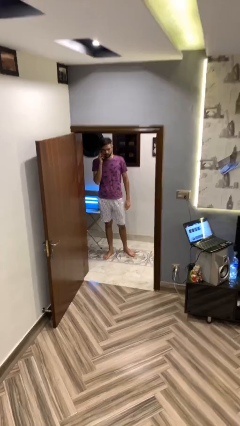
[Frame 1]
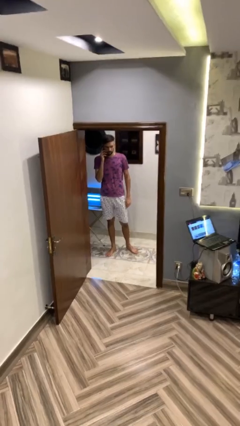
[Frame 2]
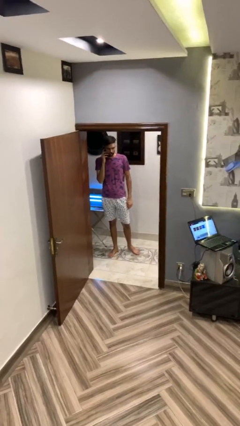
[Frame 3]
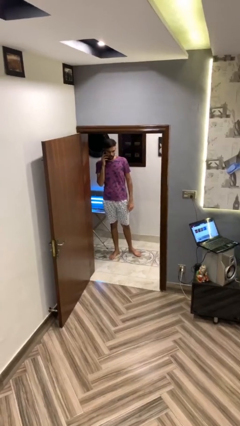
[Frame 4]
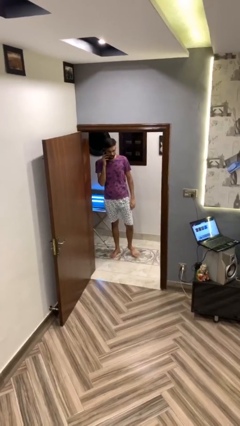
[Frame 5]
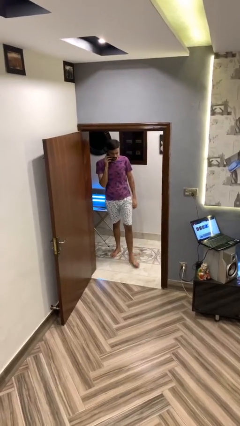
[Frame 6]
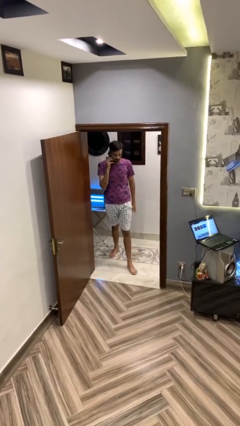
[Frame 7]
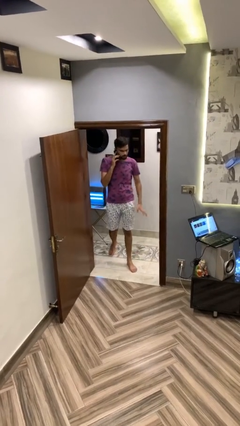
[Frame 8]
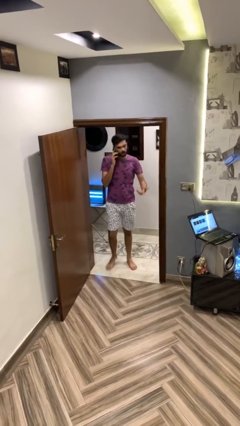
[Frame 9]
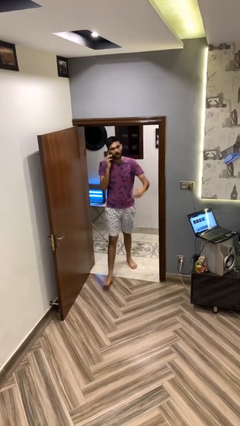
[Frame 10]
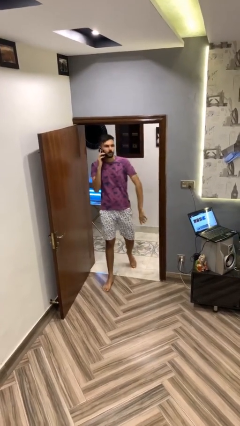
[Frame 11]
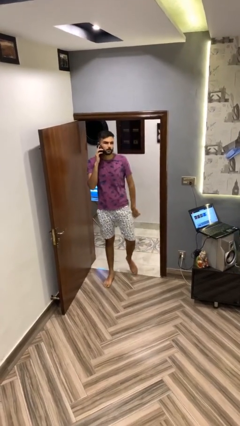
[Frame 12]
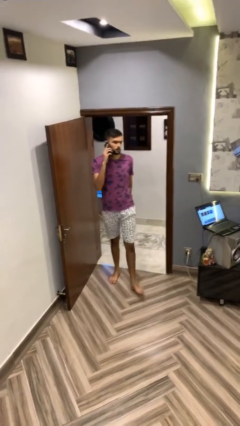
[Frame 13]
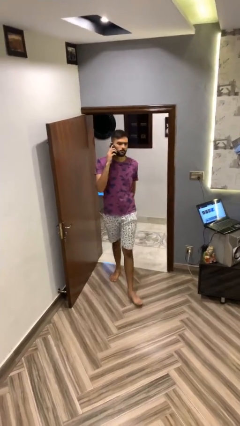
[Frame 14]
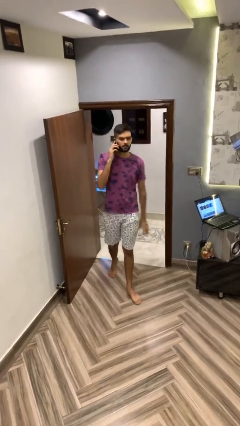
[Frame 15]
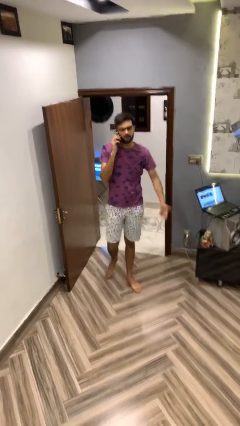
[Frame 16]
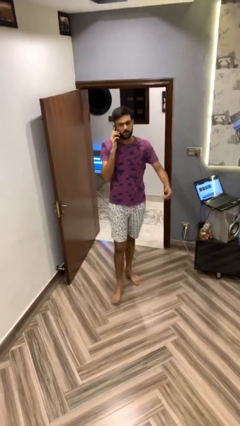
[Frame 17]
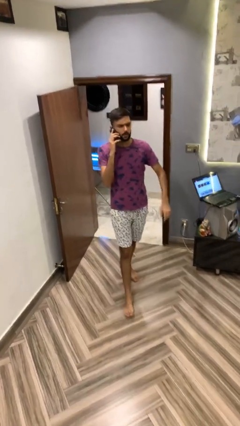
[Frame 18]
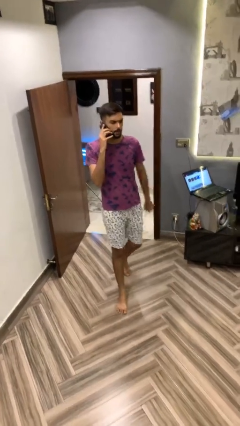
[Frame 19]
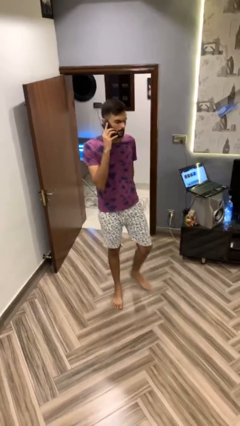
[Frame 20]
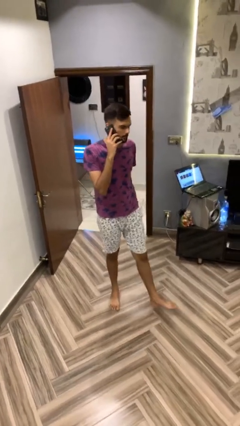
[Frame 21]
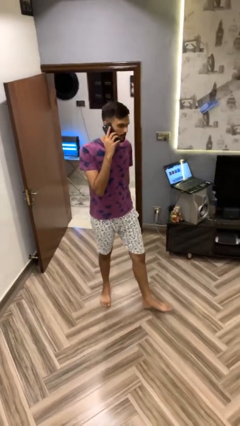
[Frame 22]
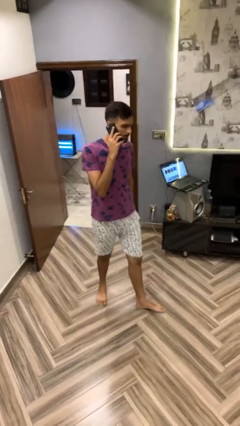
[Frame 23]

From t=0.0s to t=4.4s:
person enters scene through structure

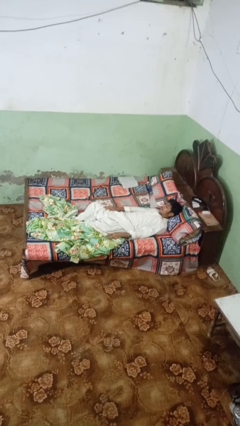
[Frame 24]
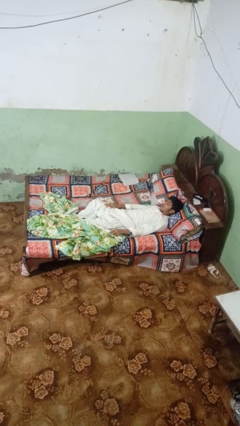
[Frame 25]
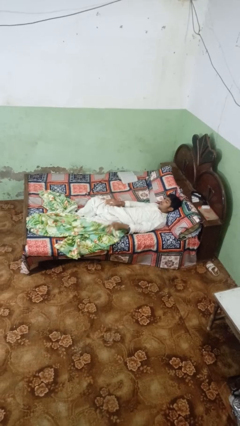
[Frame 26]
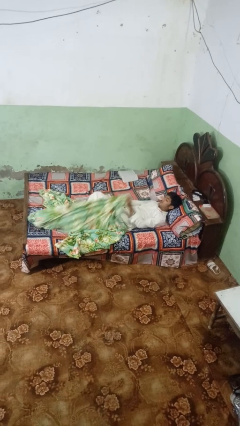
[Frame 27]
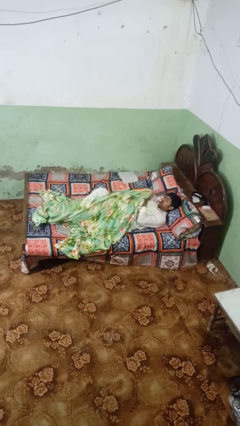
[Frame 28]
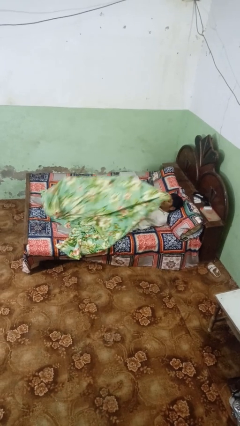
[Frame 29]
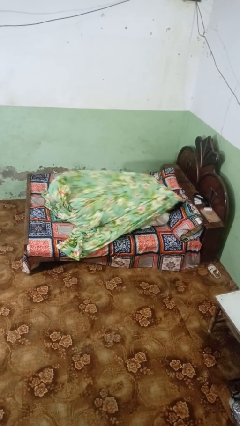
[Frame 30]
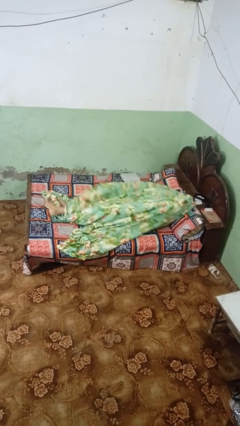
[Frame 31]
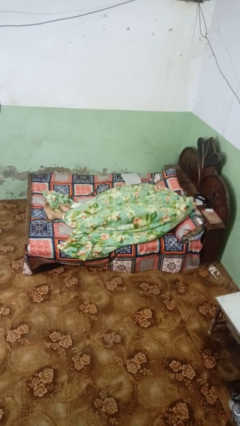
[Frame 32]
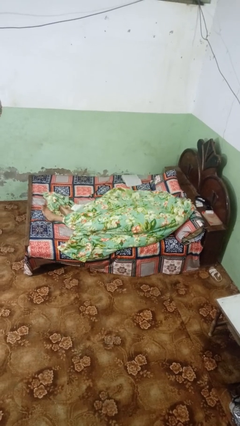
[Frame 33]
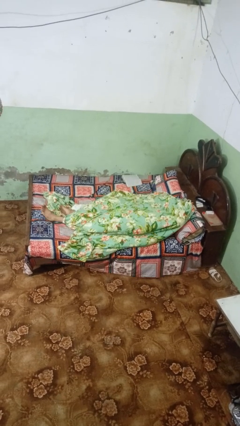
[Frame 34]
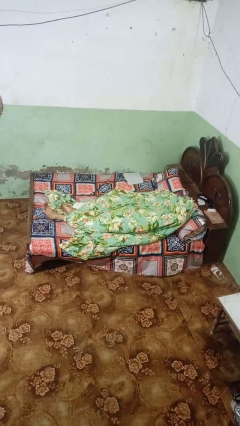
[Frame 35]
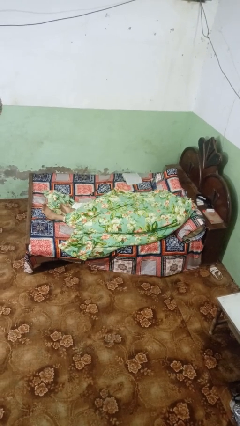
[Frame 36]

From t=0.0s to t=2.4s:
person covers with bedsheets

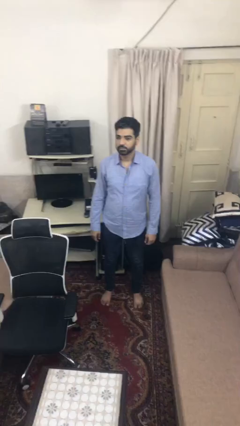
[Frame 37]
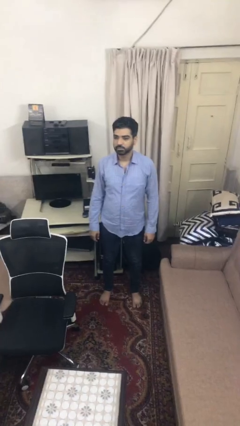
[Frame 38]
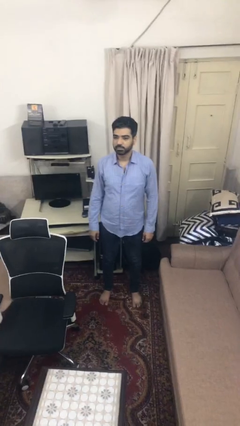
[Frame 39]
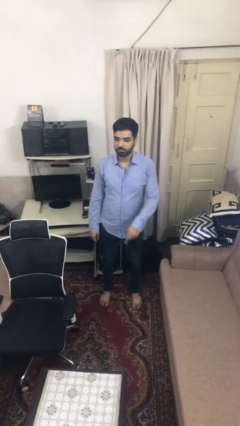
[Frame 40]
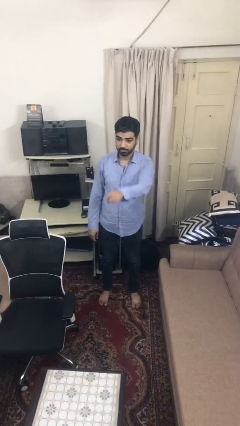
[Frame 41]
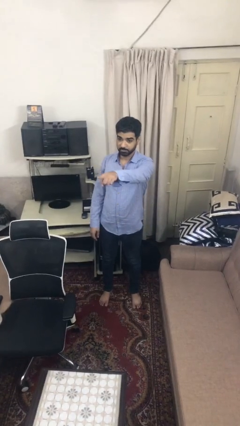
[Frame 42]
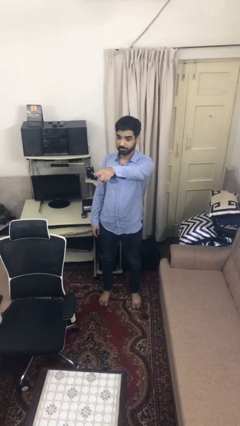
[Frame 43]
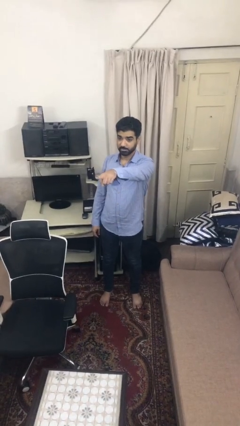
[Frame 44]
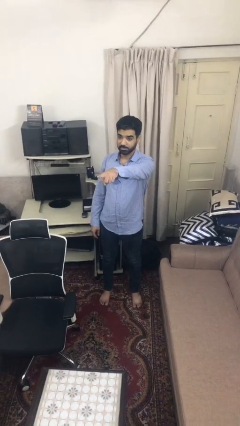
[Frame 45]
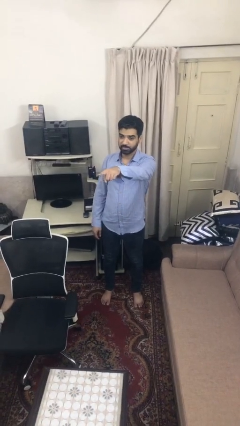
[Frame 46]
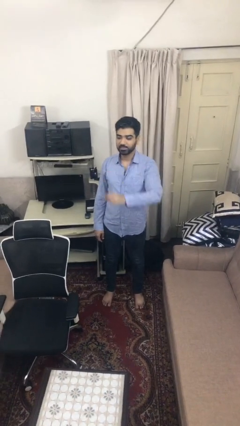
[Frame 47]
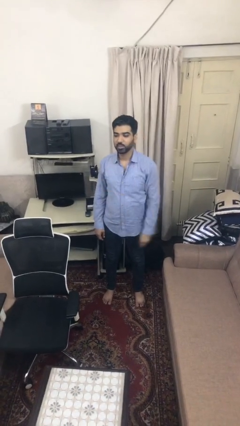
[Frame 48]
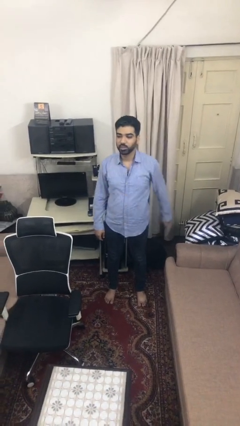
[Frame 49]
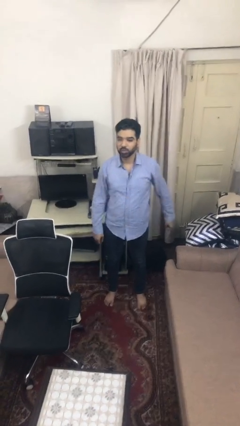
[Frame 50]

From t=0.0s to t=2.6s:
person points at person

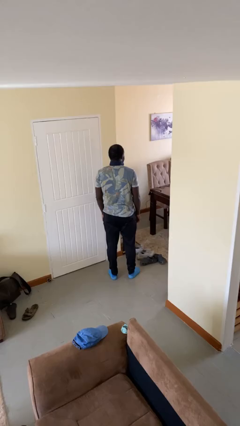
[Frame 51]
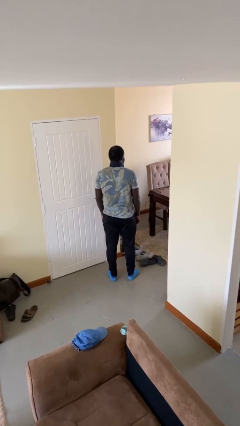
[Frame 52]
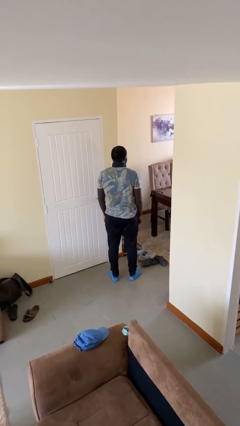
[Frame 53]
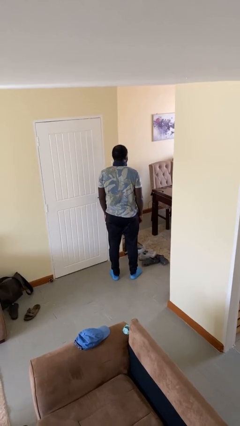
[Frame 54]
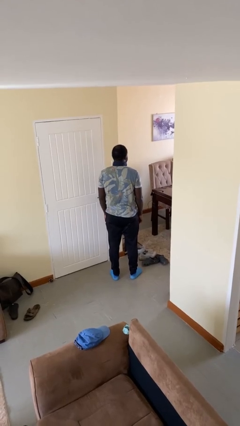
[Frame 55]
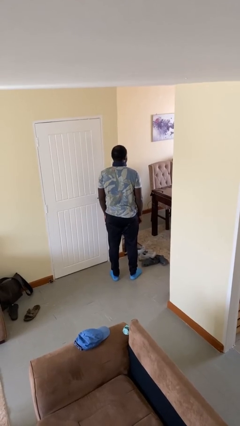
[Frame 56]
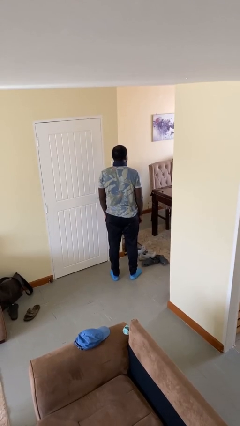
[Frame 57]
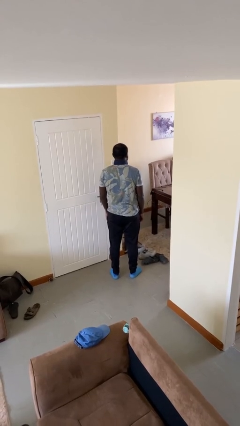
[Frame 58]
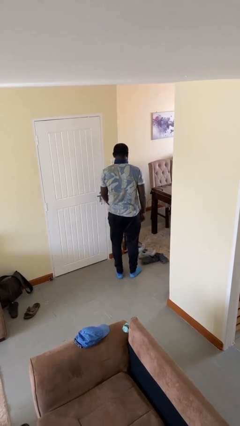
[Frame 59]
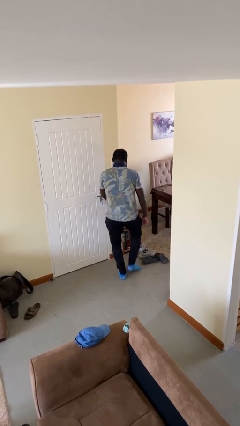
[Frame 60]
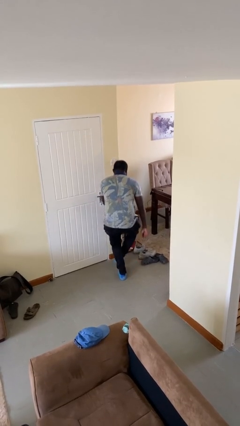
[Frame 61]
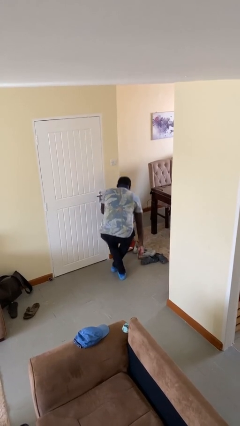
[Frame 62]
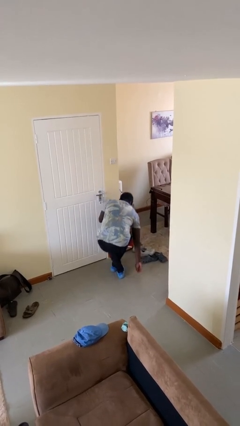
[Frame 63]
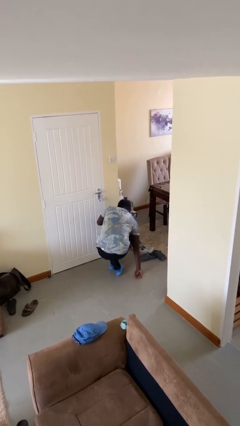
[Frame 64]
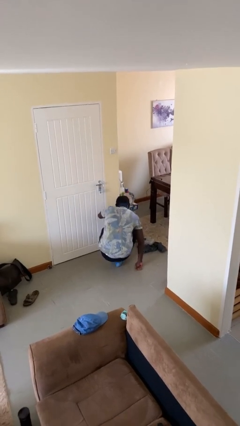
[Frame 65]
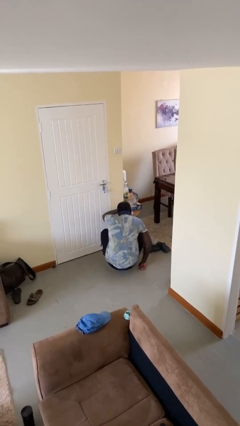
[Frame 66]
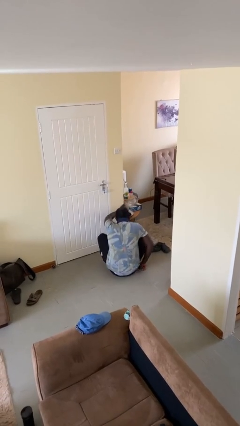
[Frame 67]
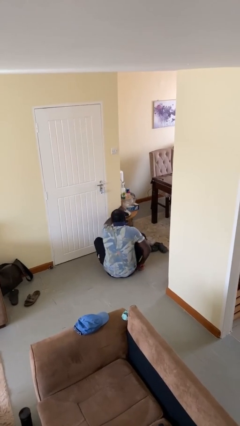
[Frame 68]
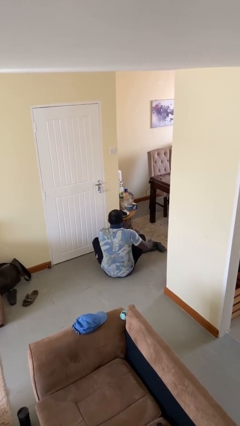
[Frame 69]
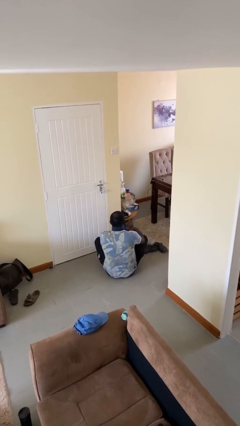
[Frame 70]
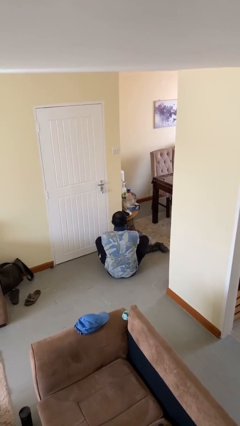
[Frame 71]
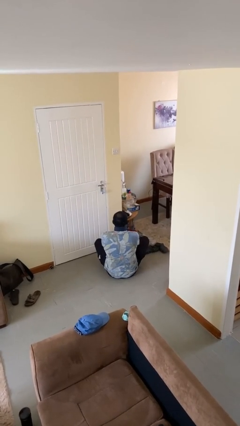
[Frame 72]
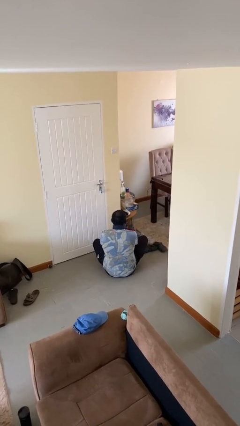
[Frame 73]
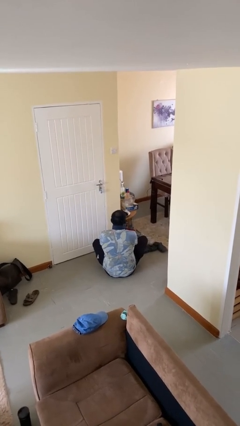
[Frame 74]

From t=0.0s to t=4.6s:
person sits crisscross

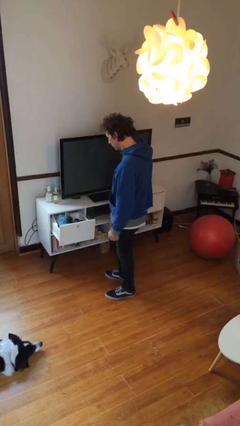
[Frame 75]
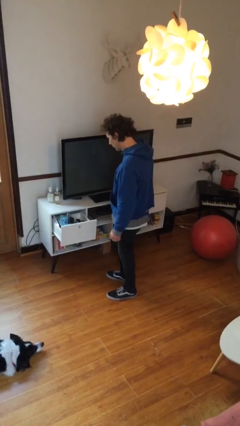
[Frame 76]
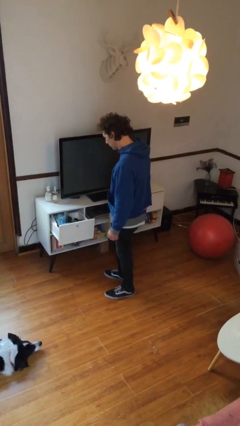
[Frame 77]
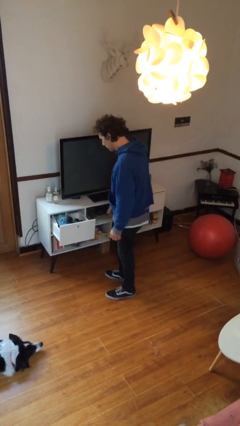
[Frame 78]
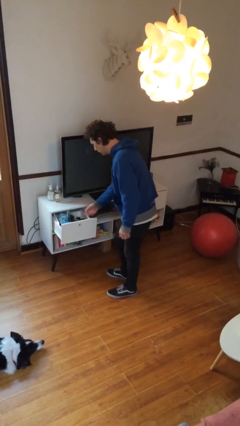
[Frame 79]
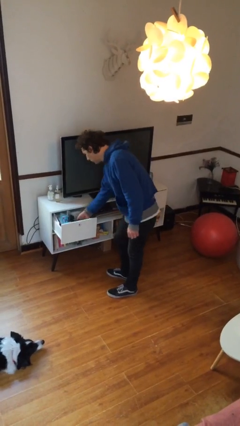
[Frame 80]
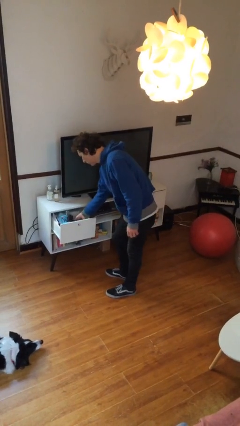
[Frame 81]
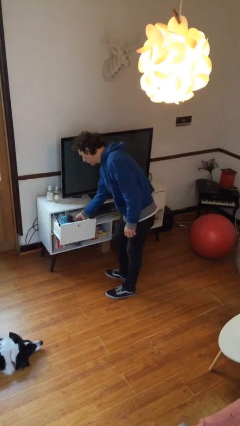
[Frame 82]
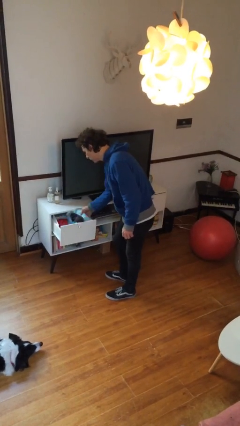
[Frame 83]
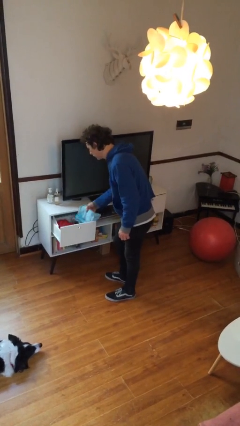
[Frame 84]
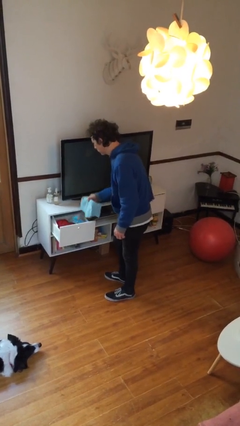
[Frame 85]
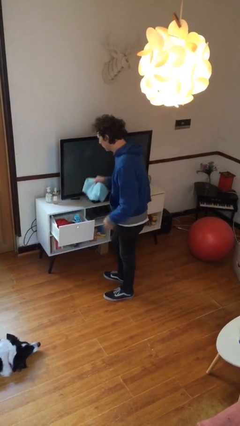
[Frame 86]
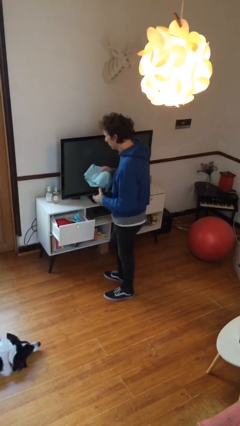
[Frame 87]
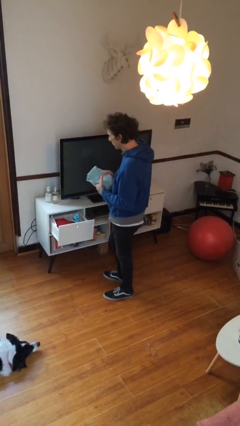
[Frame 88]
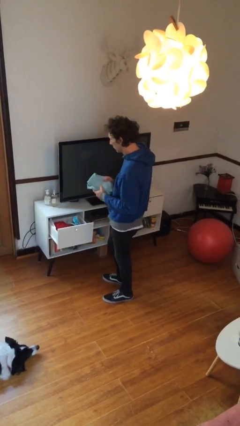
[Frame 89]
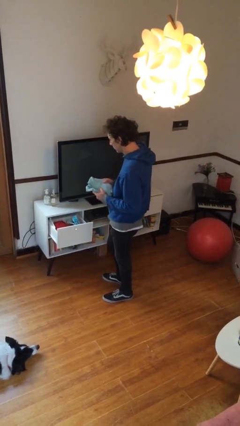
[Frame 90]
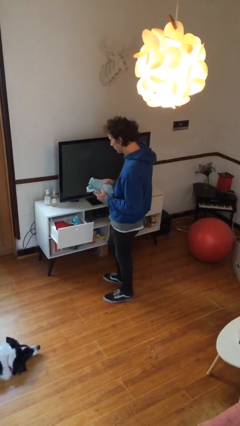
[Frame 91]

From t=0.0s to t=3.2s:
person takes clothes from dresser

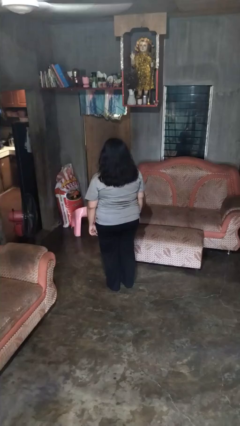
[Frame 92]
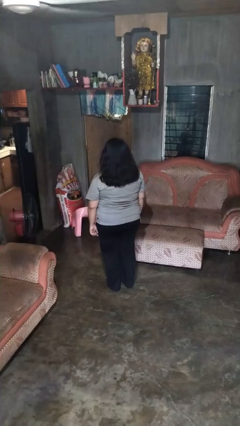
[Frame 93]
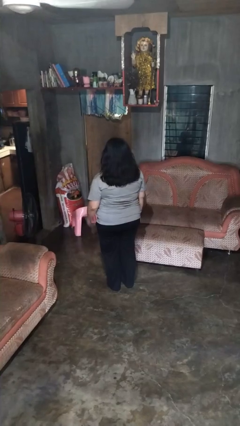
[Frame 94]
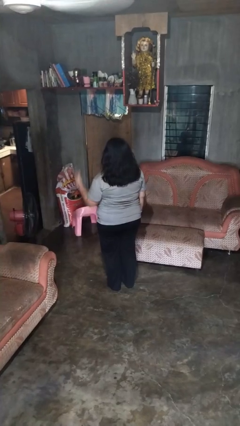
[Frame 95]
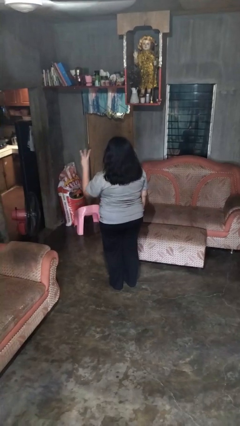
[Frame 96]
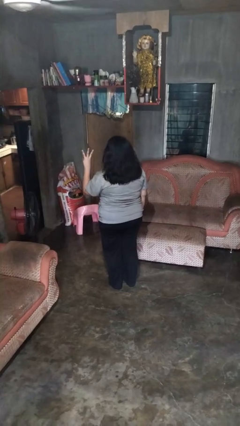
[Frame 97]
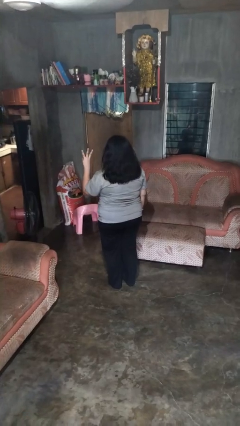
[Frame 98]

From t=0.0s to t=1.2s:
person gestures number three
